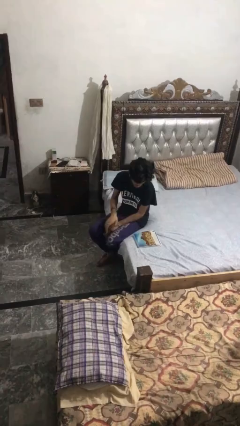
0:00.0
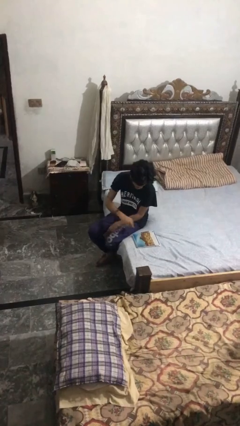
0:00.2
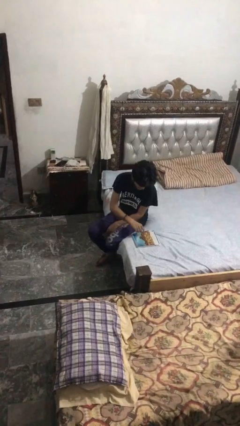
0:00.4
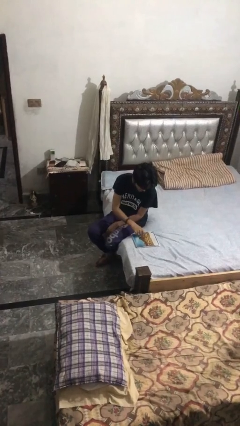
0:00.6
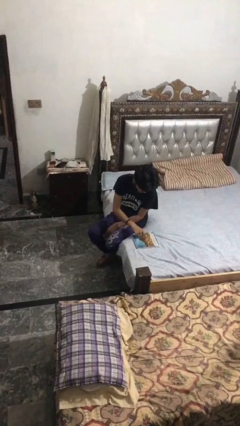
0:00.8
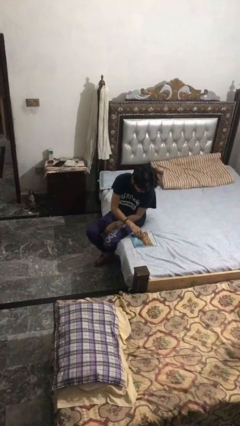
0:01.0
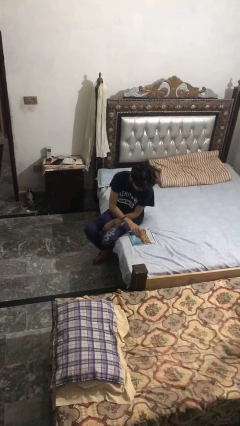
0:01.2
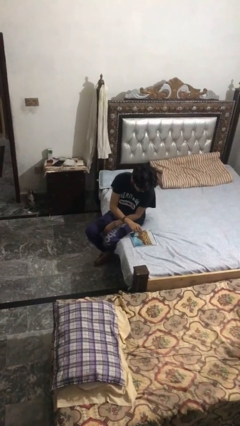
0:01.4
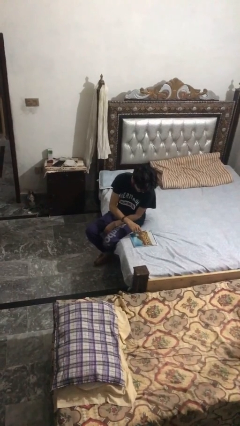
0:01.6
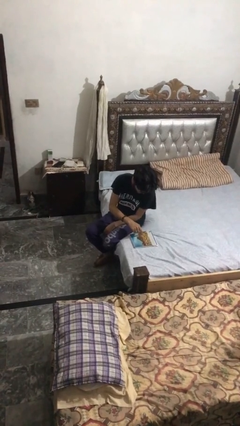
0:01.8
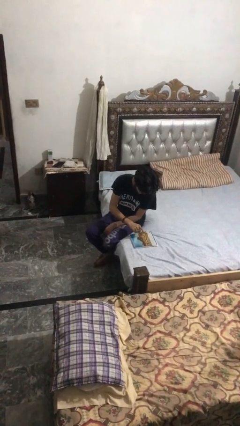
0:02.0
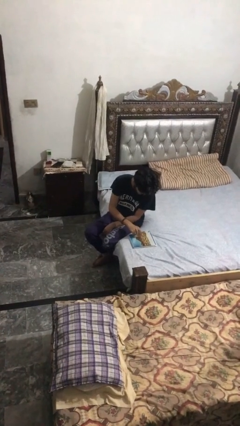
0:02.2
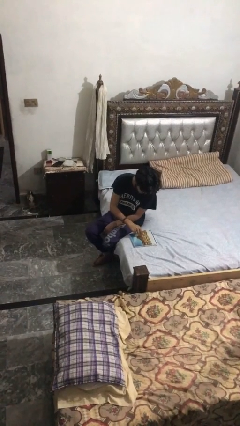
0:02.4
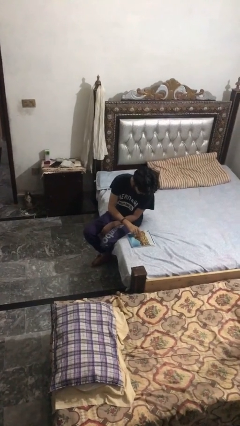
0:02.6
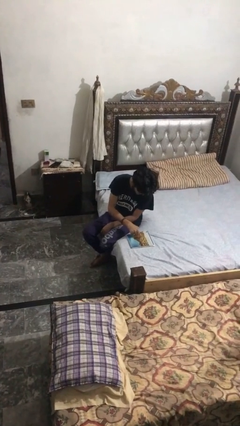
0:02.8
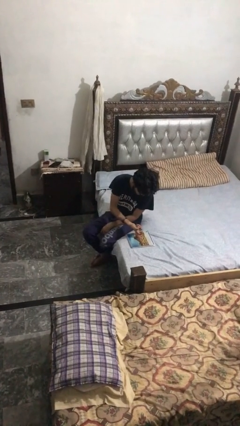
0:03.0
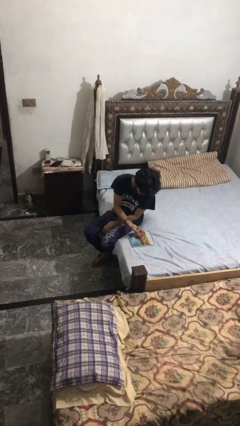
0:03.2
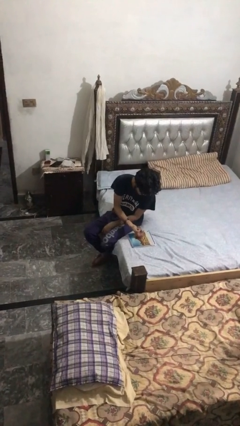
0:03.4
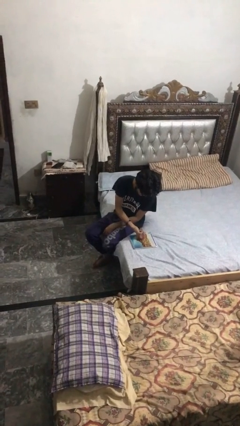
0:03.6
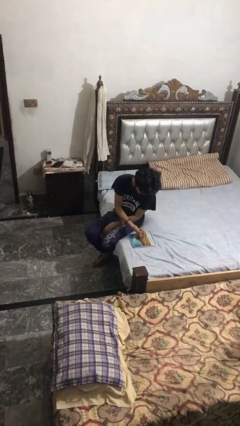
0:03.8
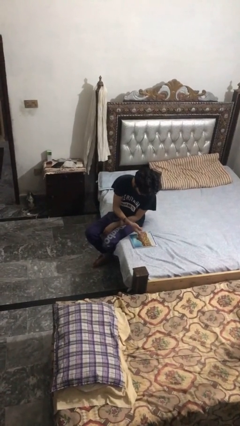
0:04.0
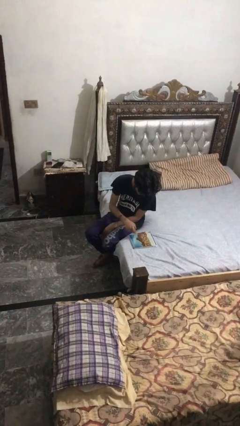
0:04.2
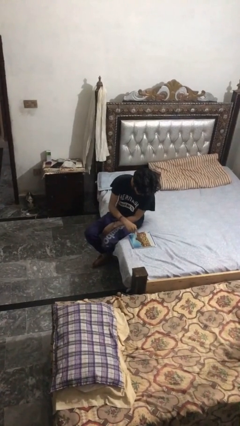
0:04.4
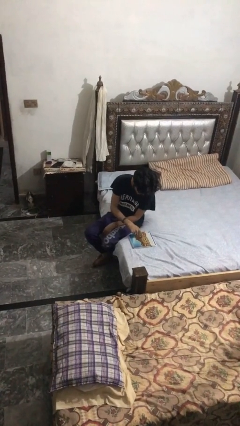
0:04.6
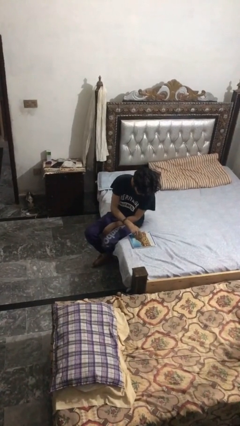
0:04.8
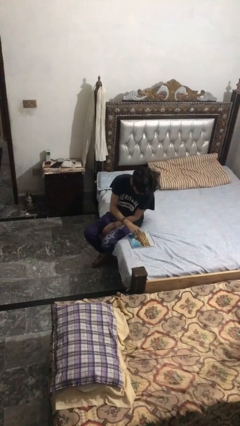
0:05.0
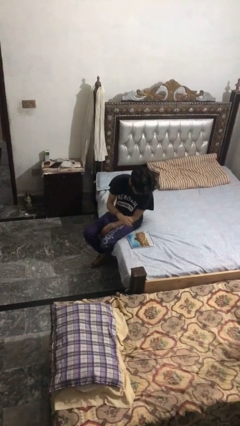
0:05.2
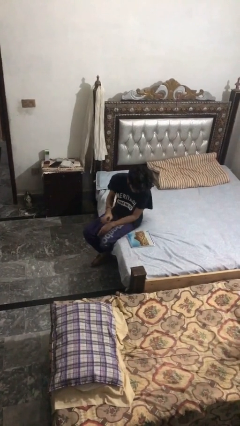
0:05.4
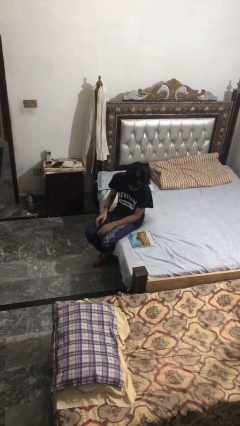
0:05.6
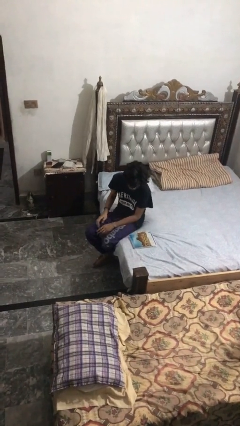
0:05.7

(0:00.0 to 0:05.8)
person taps object with finger

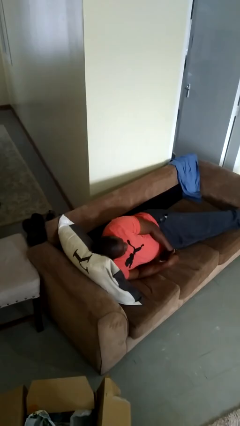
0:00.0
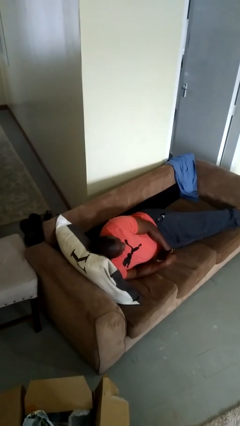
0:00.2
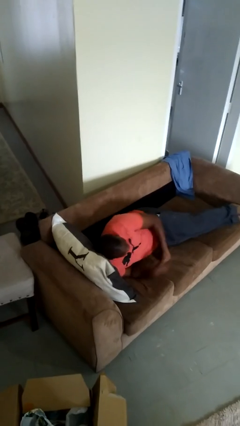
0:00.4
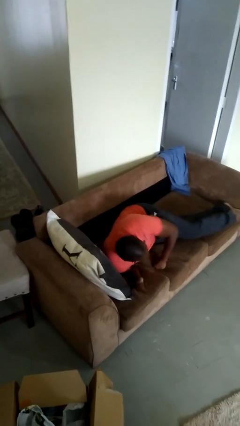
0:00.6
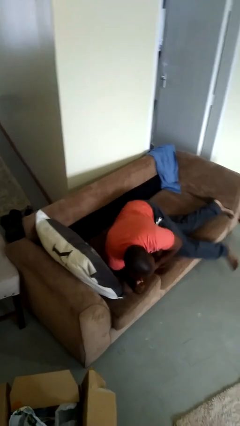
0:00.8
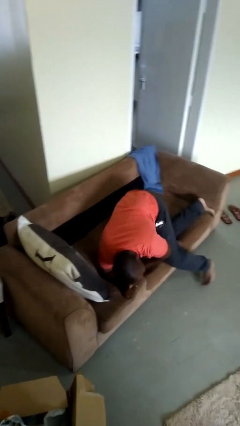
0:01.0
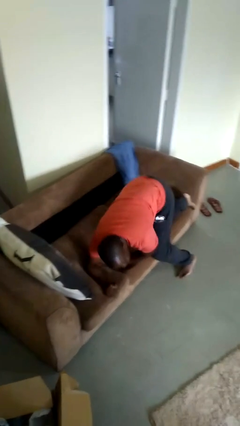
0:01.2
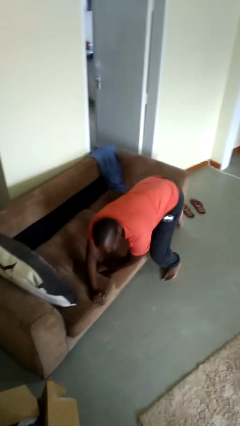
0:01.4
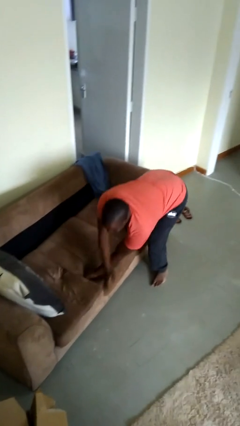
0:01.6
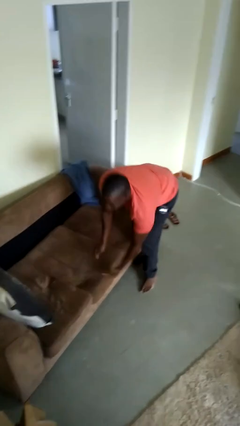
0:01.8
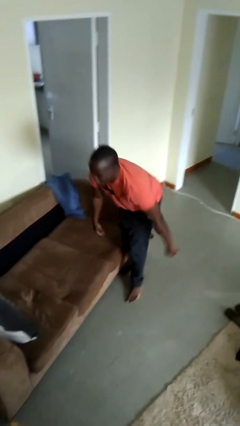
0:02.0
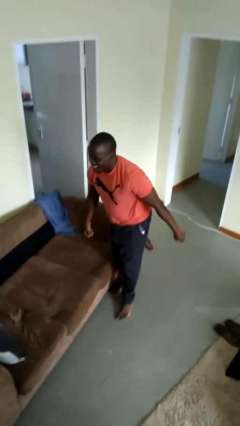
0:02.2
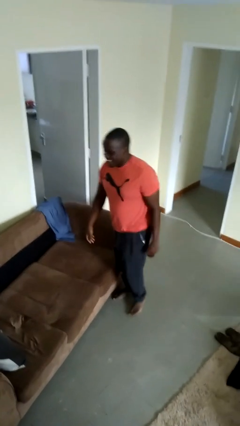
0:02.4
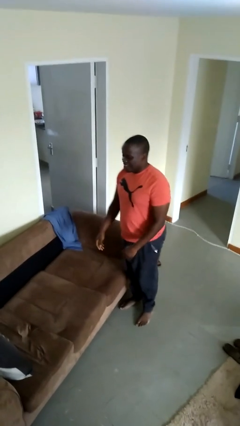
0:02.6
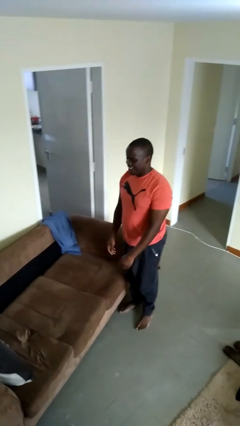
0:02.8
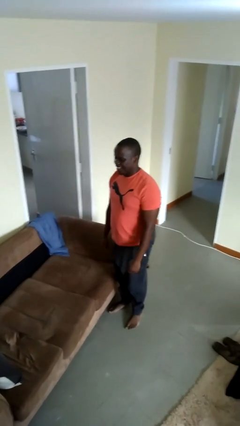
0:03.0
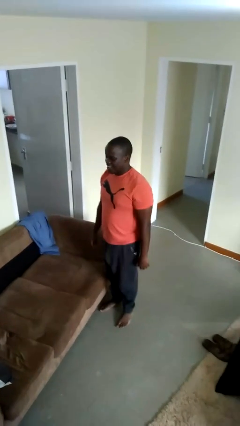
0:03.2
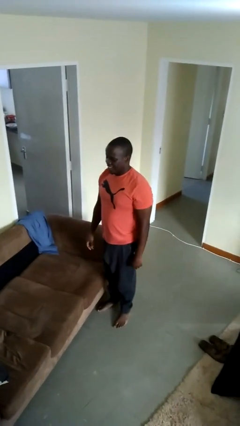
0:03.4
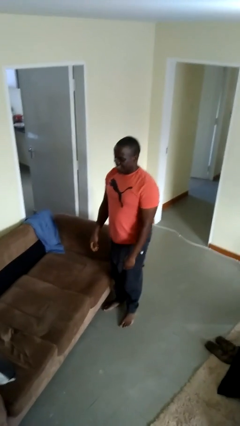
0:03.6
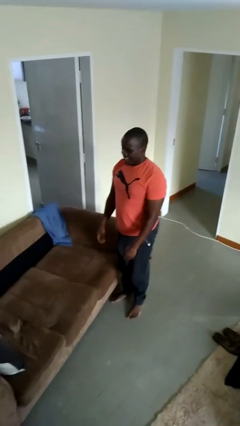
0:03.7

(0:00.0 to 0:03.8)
person stands up

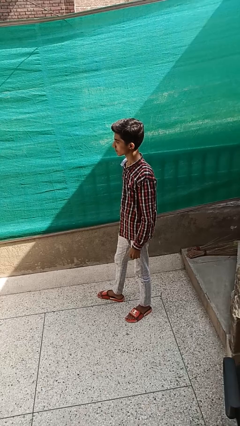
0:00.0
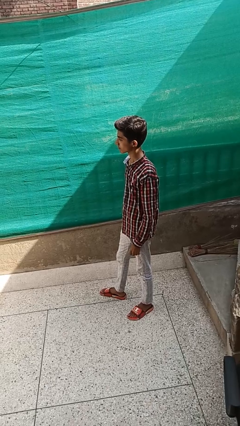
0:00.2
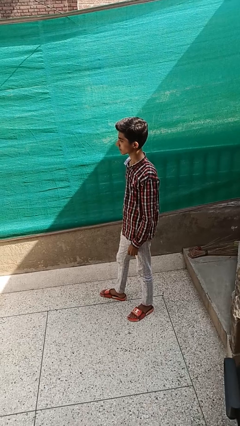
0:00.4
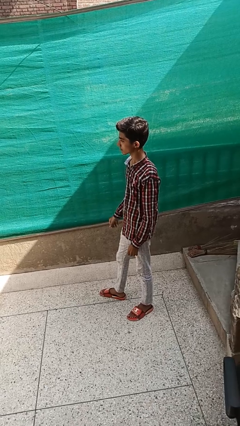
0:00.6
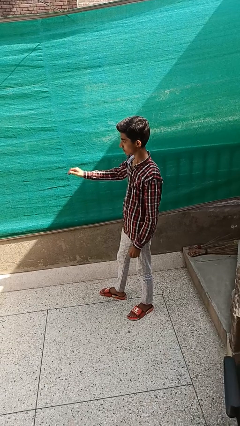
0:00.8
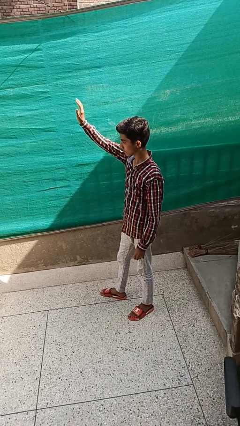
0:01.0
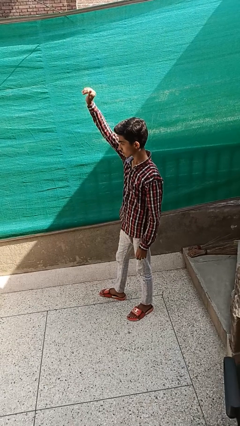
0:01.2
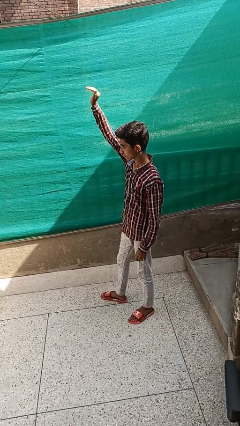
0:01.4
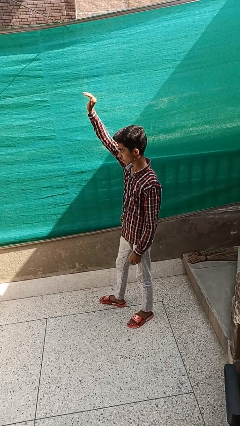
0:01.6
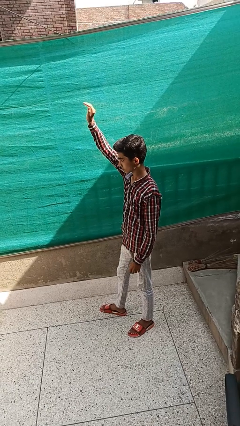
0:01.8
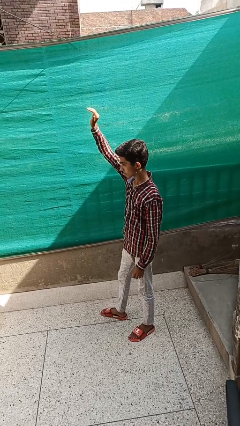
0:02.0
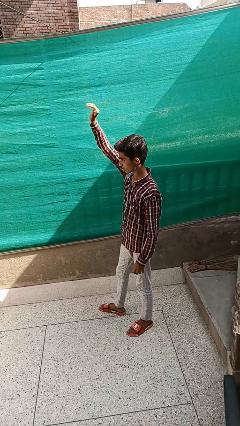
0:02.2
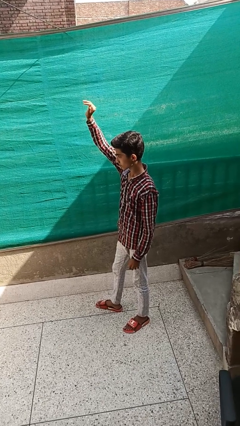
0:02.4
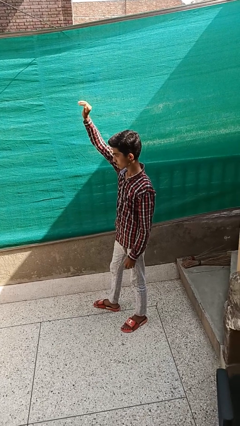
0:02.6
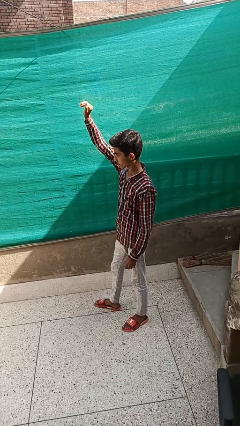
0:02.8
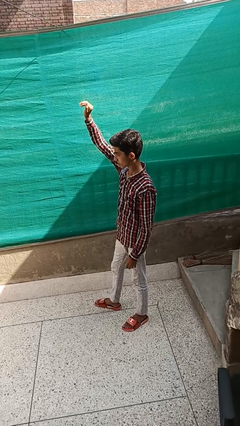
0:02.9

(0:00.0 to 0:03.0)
person gestures come here

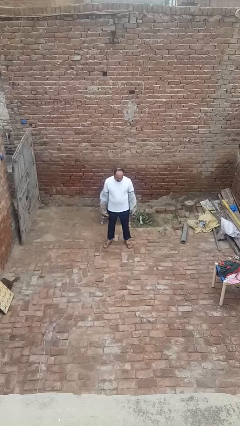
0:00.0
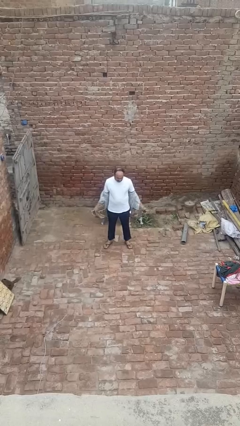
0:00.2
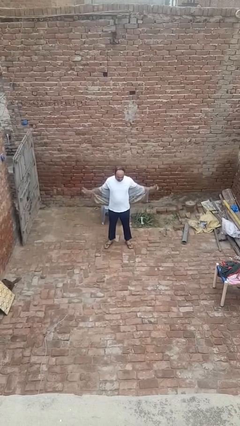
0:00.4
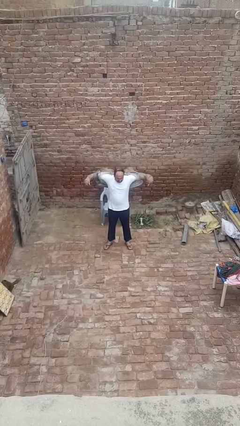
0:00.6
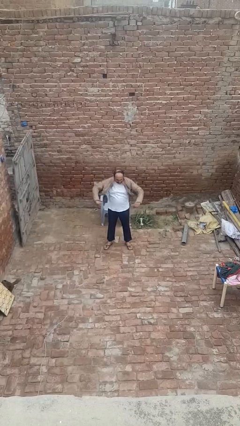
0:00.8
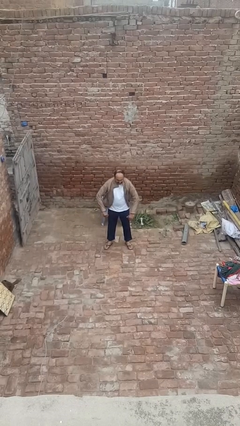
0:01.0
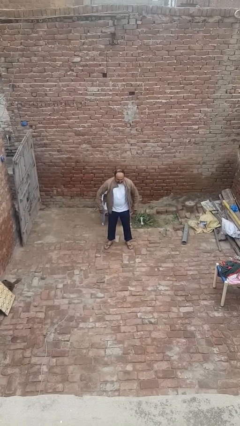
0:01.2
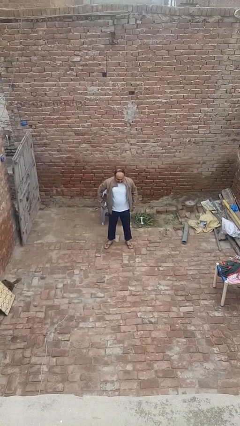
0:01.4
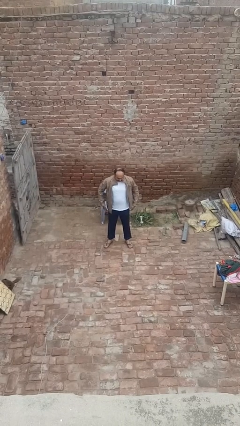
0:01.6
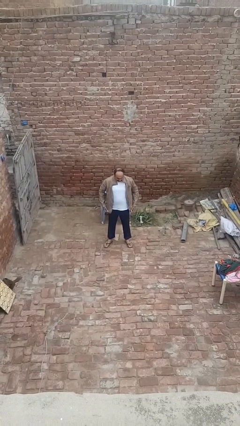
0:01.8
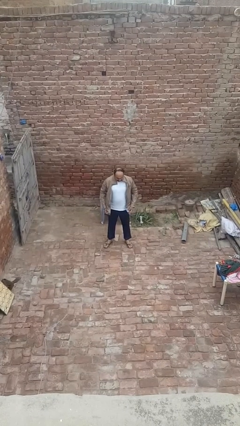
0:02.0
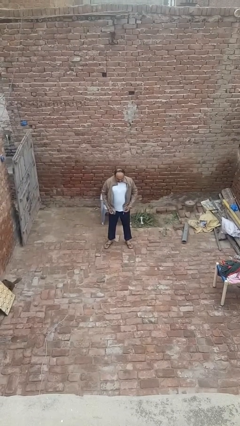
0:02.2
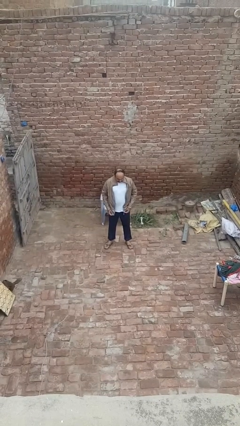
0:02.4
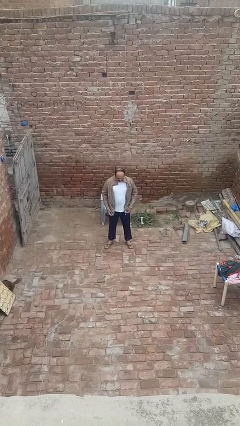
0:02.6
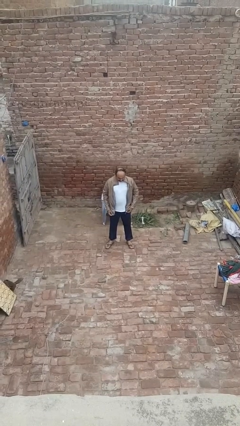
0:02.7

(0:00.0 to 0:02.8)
person puts on jacket

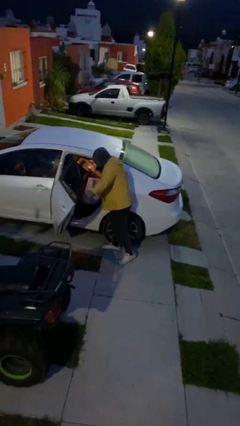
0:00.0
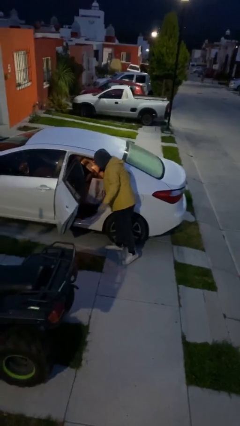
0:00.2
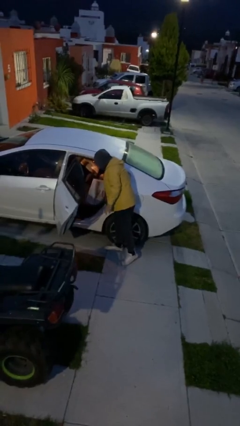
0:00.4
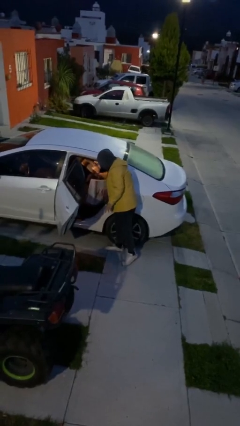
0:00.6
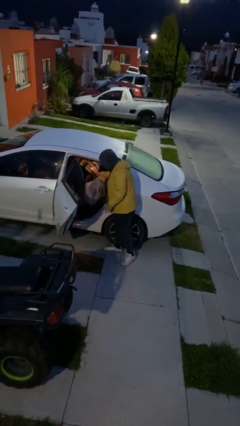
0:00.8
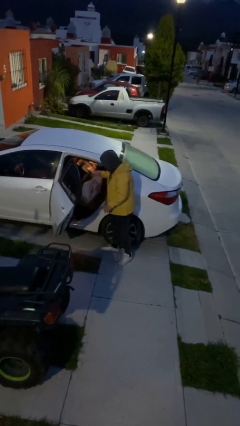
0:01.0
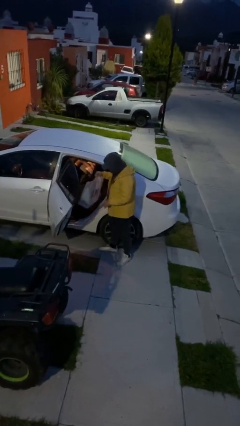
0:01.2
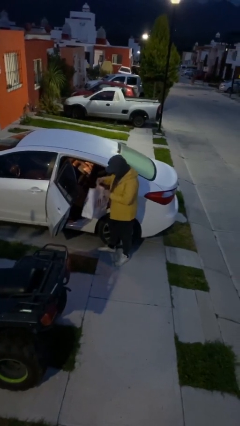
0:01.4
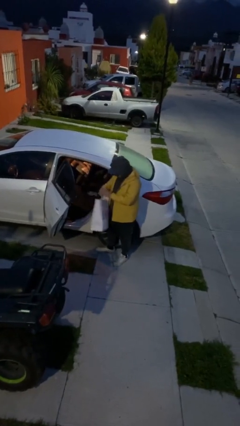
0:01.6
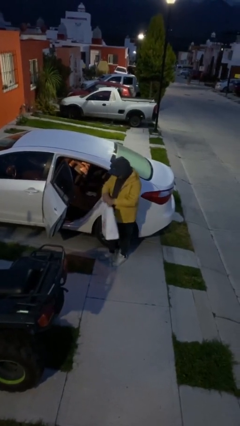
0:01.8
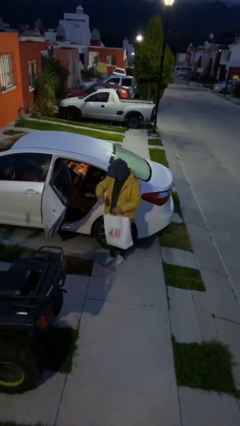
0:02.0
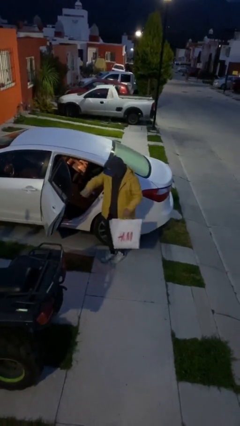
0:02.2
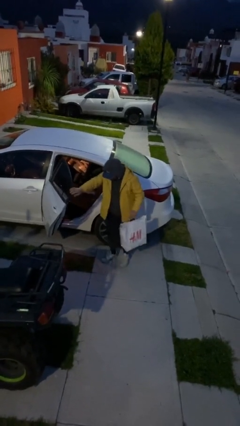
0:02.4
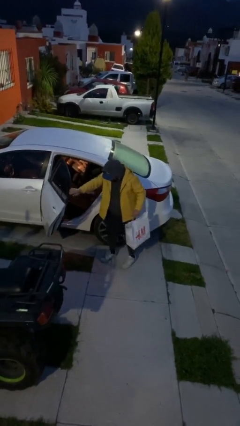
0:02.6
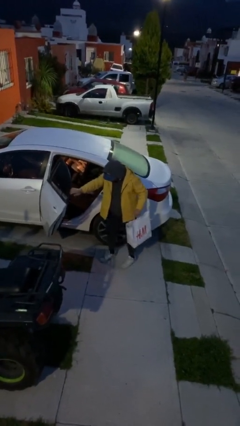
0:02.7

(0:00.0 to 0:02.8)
person unloads car
